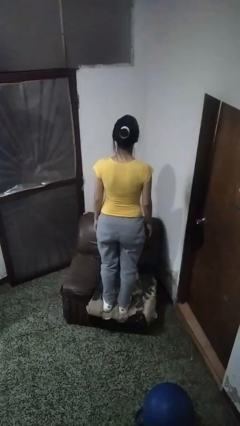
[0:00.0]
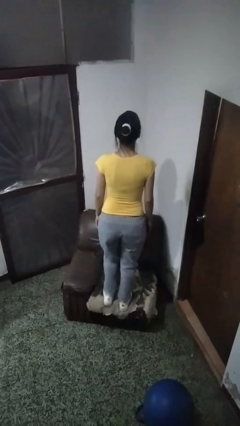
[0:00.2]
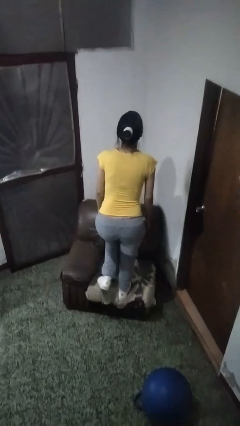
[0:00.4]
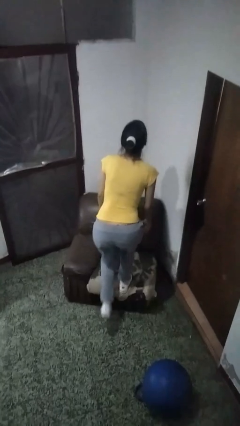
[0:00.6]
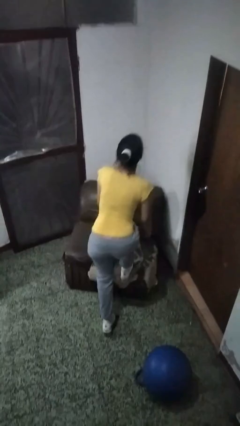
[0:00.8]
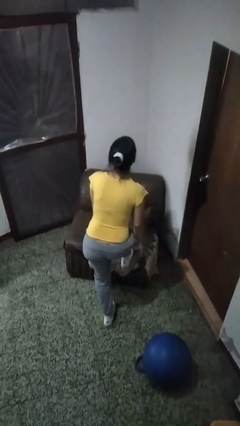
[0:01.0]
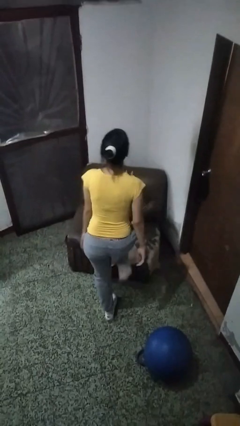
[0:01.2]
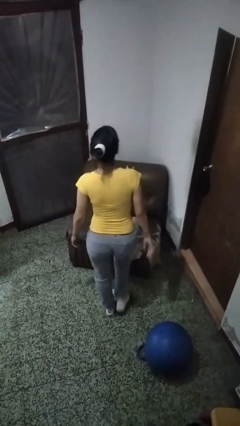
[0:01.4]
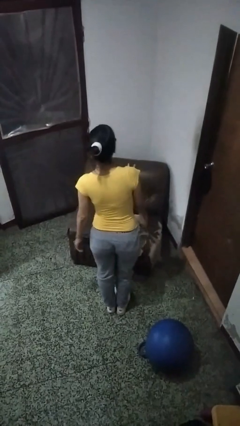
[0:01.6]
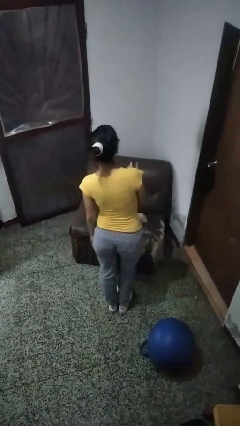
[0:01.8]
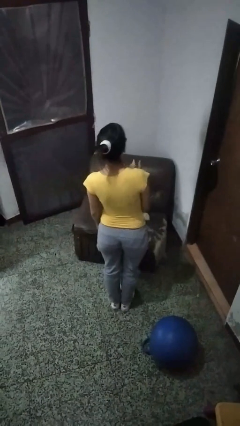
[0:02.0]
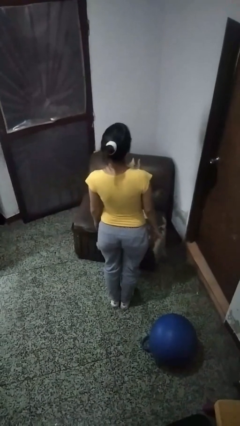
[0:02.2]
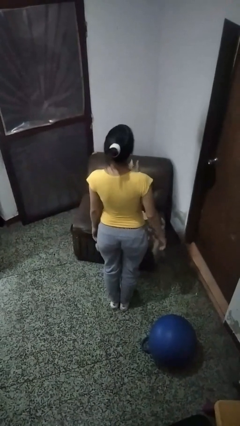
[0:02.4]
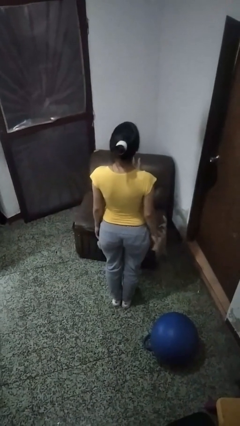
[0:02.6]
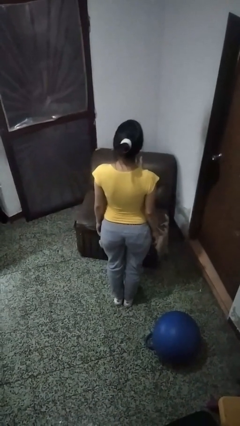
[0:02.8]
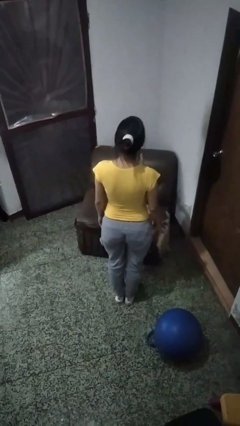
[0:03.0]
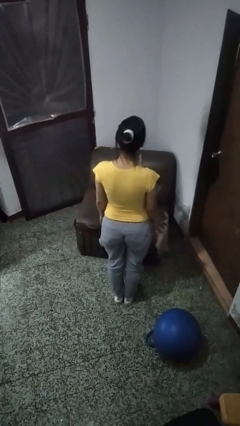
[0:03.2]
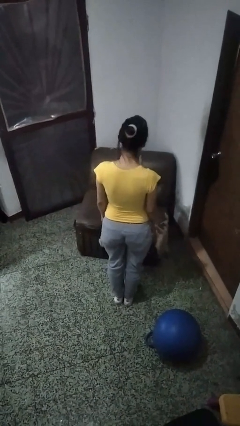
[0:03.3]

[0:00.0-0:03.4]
person climbs off couch

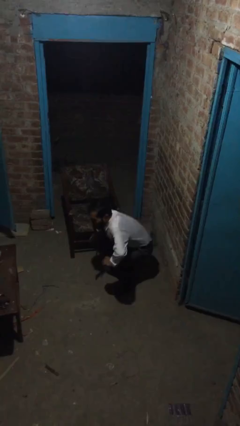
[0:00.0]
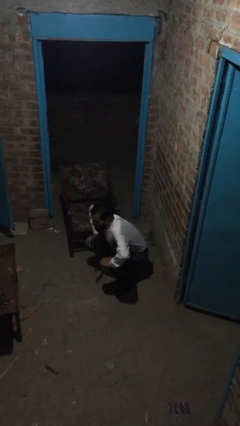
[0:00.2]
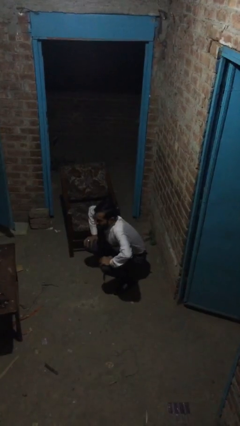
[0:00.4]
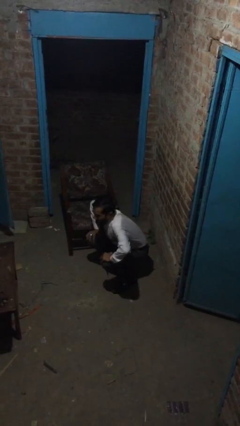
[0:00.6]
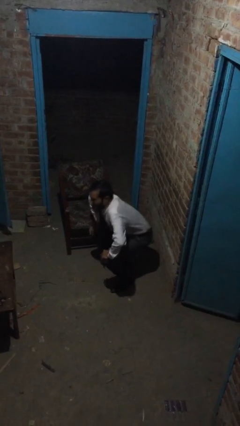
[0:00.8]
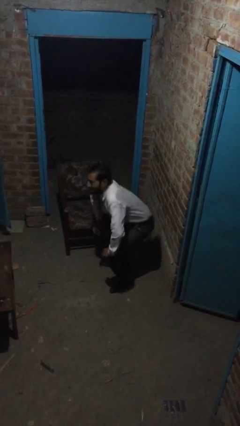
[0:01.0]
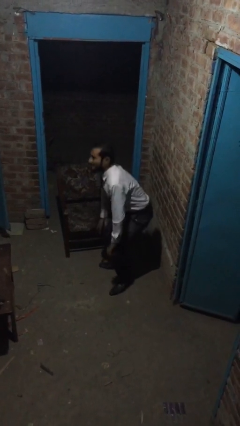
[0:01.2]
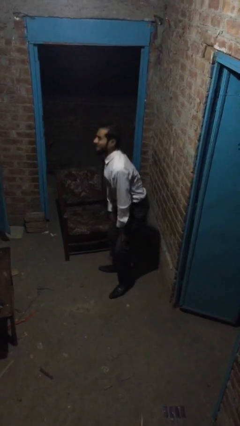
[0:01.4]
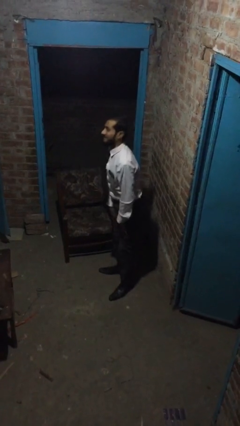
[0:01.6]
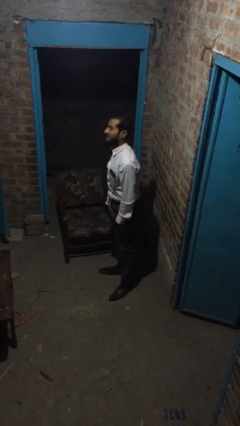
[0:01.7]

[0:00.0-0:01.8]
person stands up

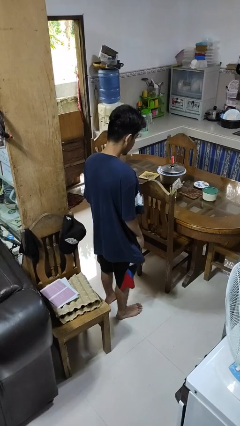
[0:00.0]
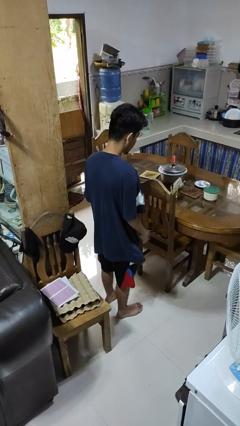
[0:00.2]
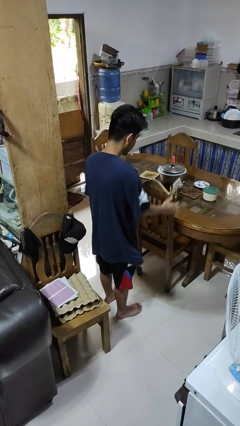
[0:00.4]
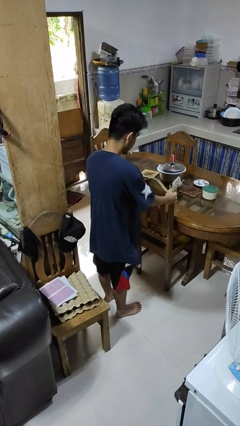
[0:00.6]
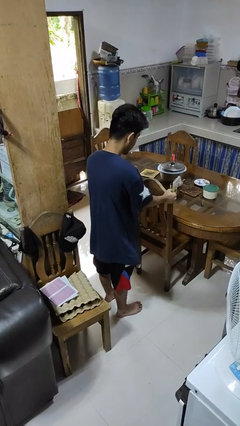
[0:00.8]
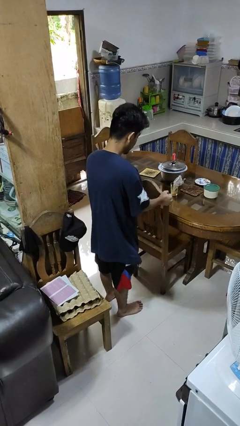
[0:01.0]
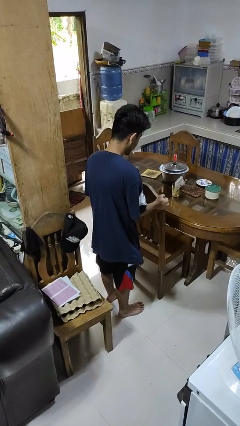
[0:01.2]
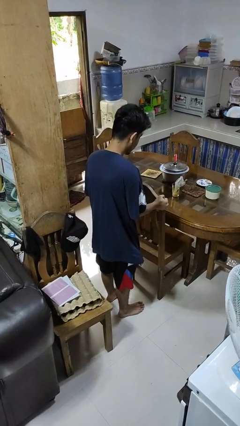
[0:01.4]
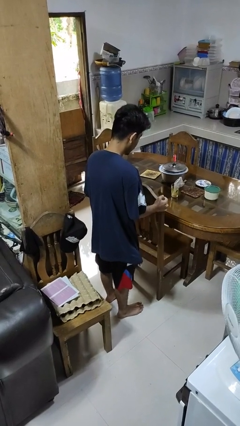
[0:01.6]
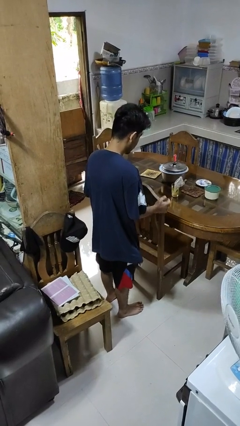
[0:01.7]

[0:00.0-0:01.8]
person pulls out chair

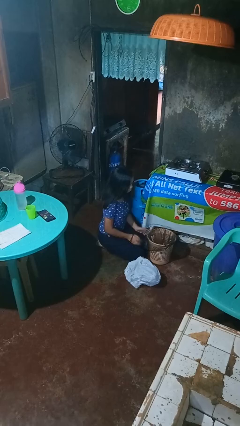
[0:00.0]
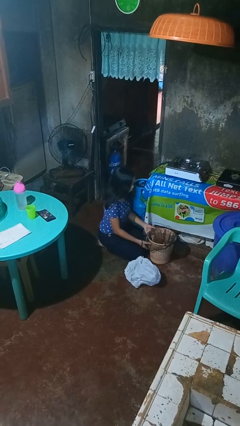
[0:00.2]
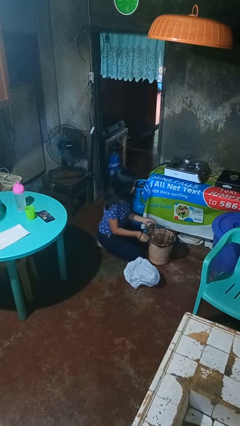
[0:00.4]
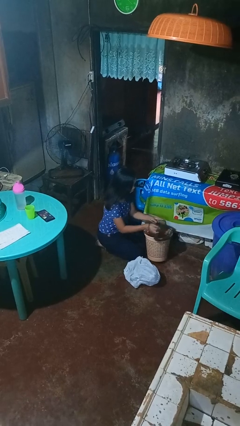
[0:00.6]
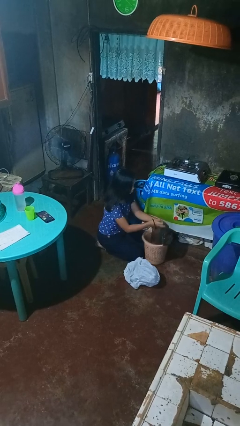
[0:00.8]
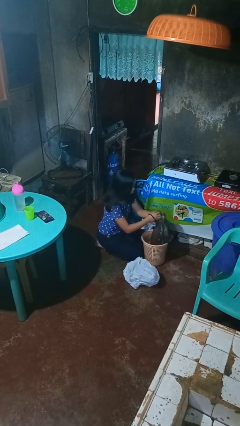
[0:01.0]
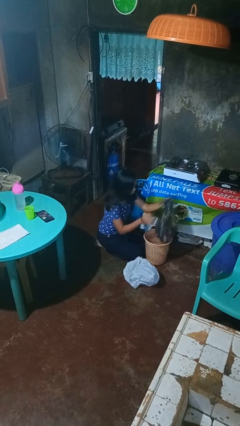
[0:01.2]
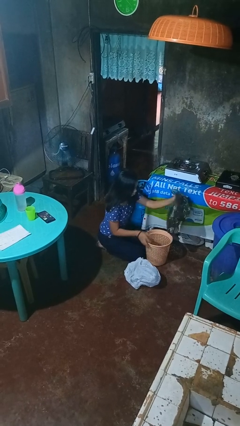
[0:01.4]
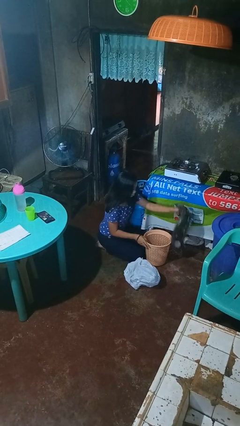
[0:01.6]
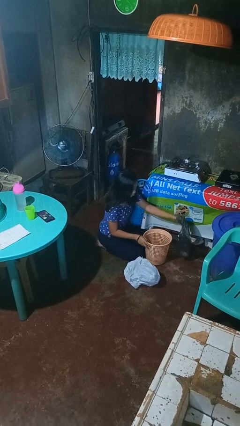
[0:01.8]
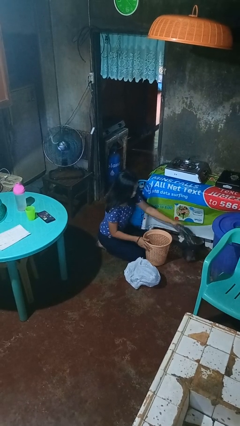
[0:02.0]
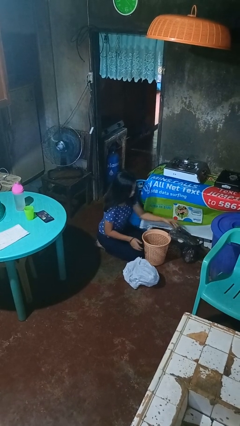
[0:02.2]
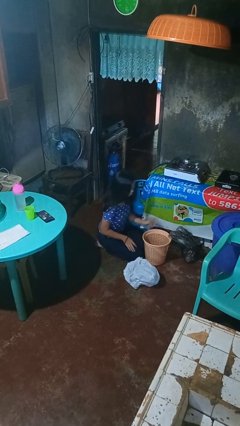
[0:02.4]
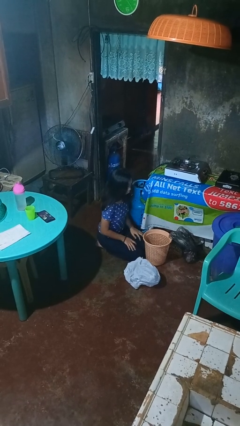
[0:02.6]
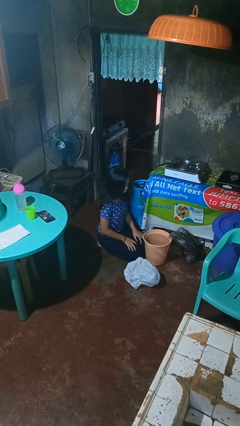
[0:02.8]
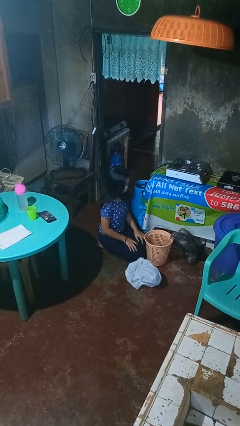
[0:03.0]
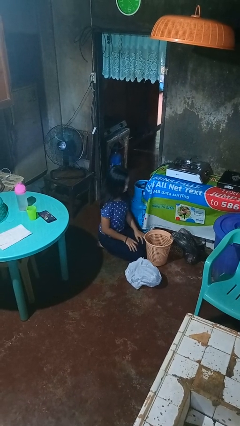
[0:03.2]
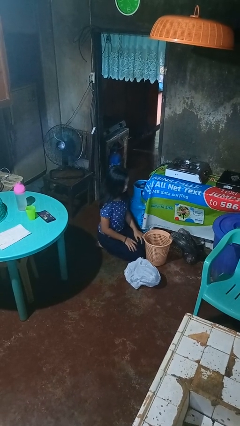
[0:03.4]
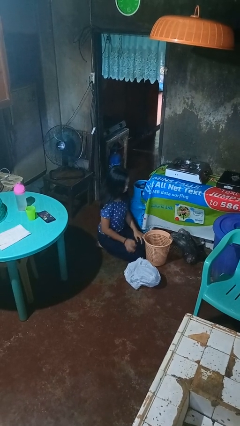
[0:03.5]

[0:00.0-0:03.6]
person removes trashbag from trashcan

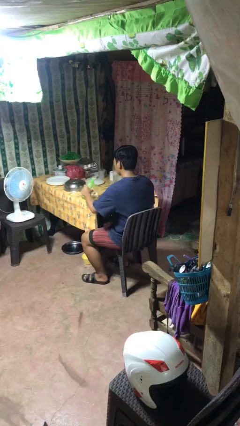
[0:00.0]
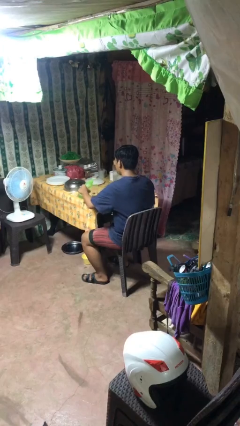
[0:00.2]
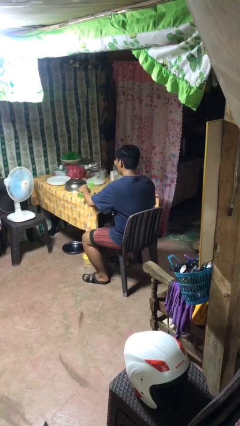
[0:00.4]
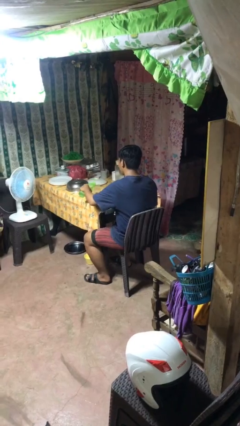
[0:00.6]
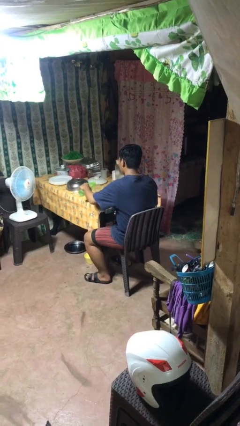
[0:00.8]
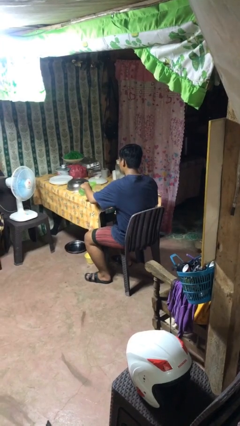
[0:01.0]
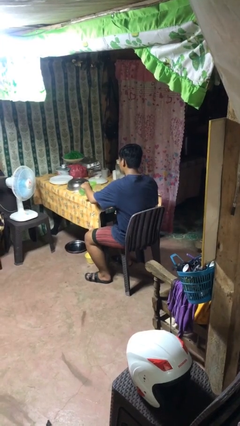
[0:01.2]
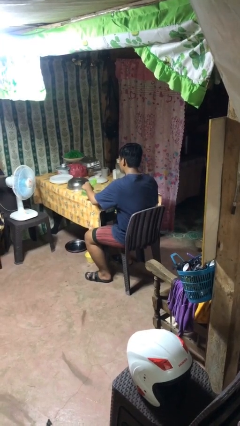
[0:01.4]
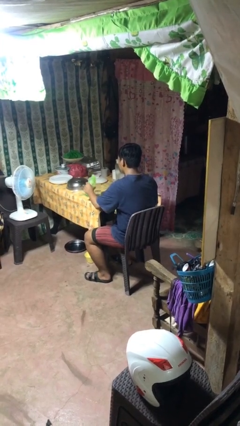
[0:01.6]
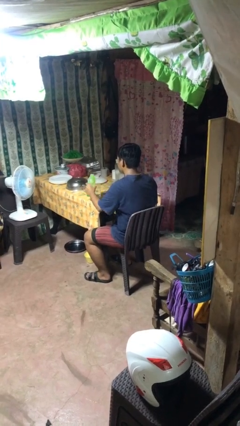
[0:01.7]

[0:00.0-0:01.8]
person pours liquid into cup

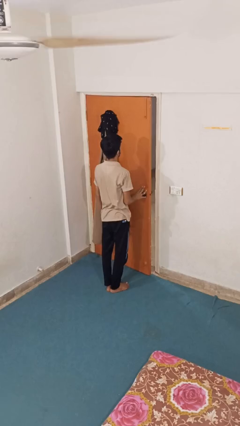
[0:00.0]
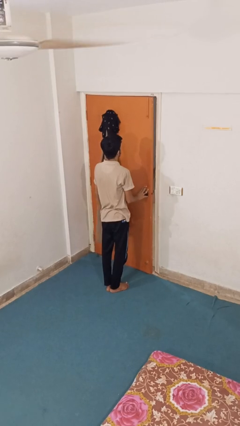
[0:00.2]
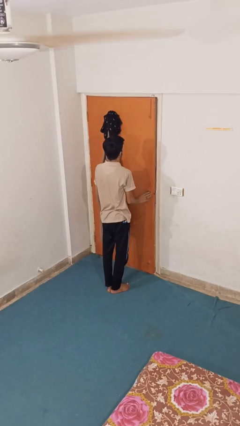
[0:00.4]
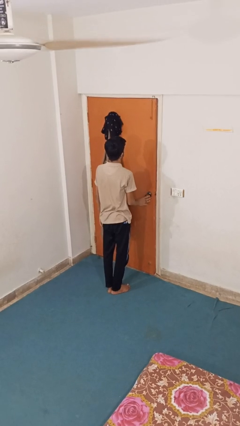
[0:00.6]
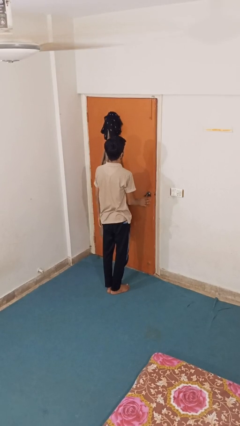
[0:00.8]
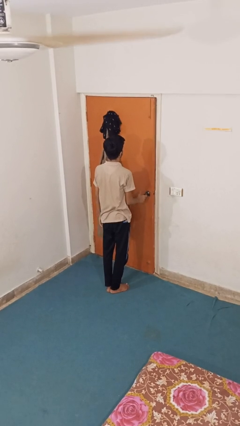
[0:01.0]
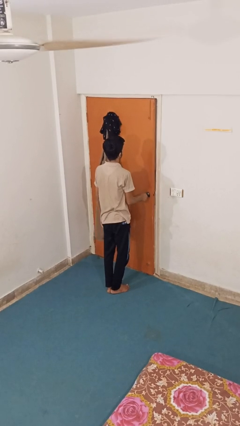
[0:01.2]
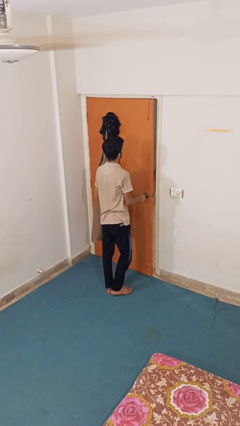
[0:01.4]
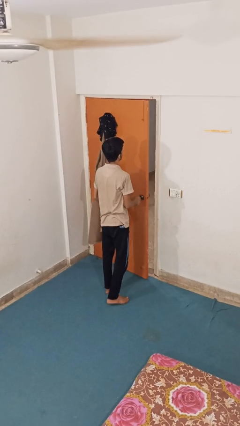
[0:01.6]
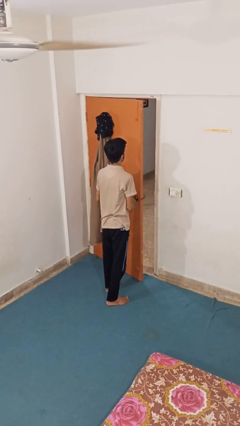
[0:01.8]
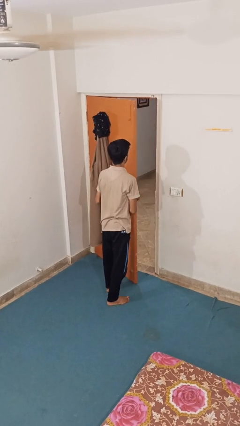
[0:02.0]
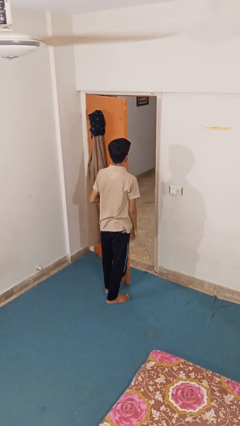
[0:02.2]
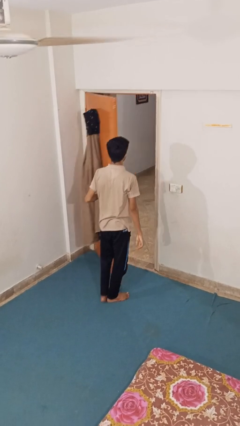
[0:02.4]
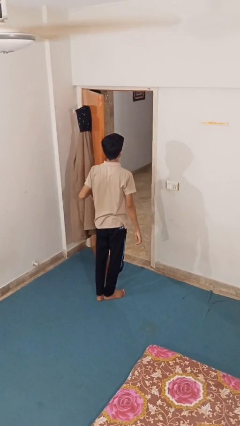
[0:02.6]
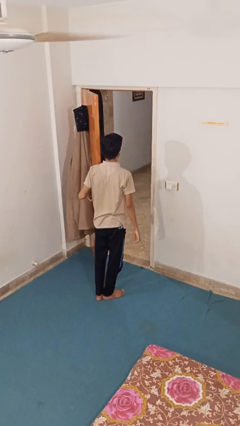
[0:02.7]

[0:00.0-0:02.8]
person opens facility door

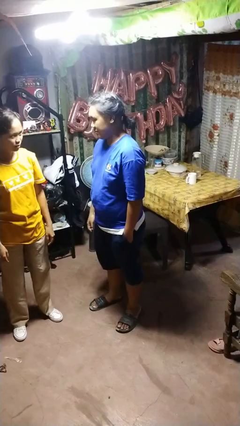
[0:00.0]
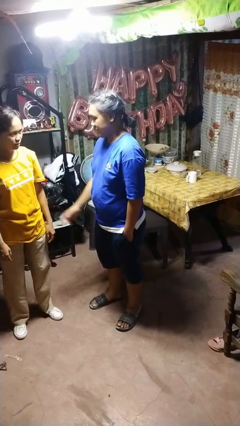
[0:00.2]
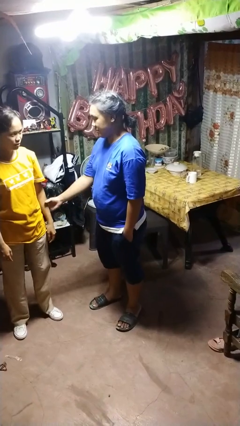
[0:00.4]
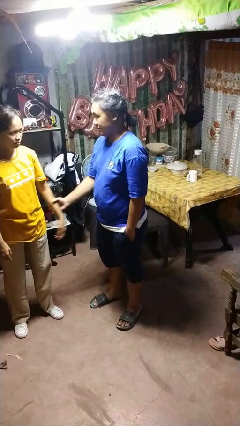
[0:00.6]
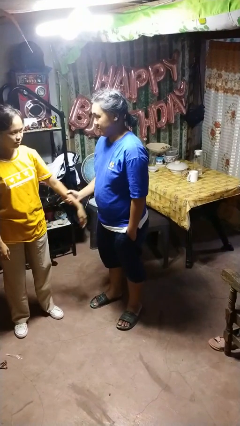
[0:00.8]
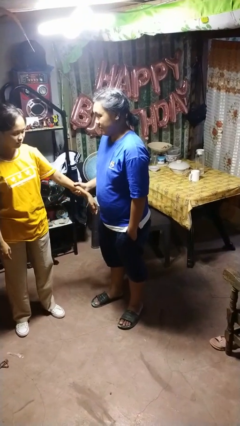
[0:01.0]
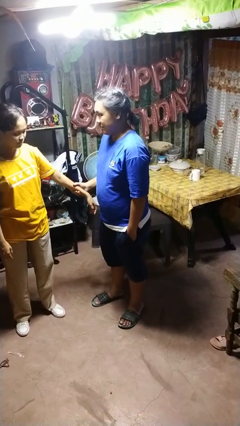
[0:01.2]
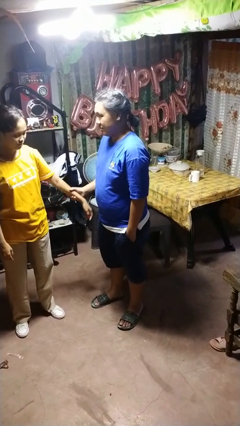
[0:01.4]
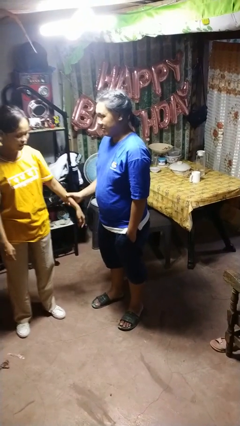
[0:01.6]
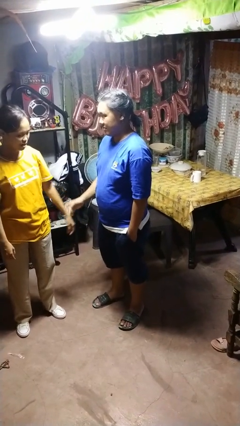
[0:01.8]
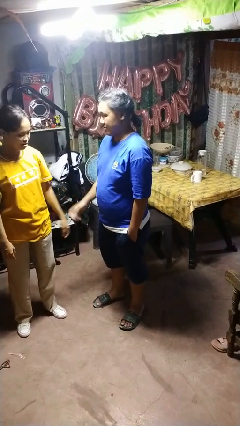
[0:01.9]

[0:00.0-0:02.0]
person grabs person by forearm

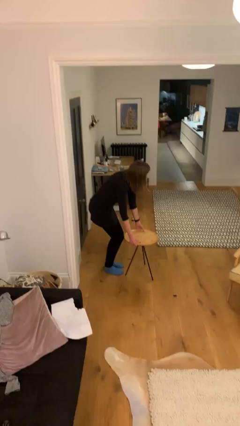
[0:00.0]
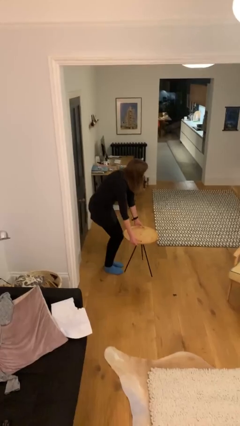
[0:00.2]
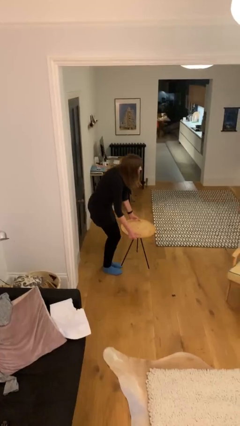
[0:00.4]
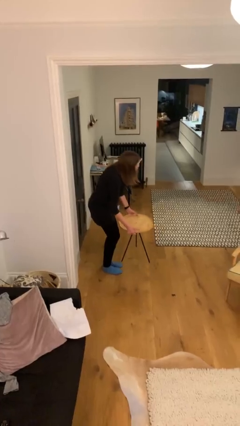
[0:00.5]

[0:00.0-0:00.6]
person picks up object from floor
